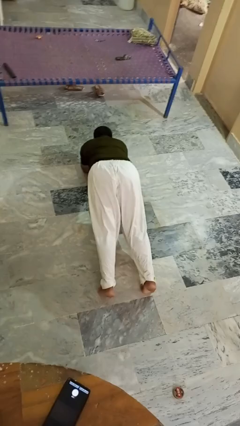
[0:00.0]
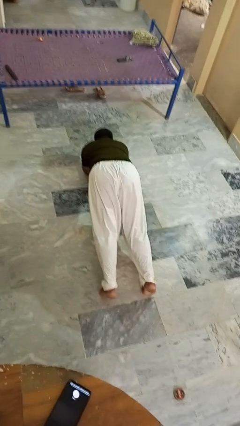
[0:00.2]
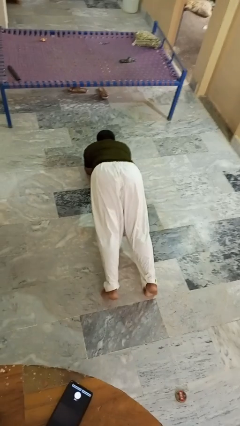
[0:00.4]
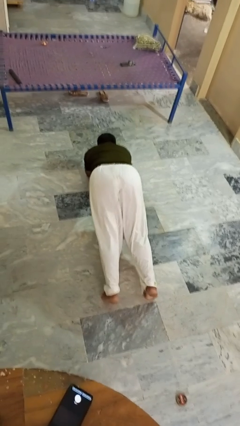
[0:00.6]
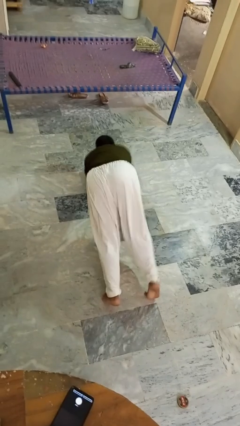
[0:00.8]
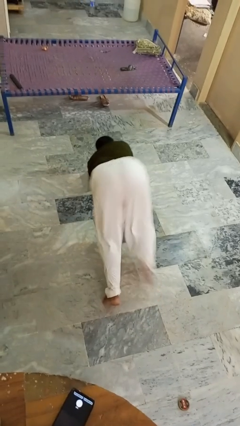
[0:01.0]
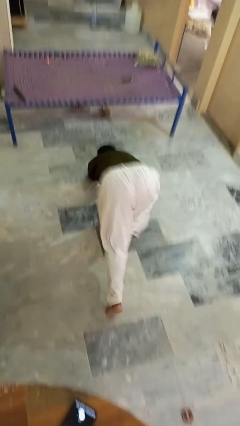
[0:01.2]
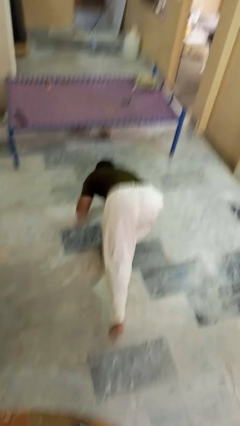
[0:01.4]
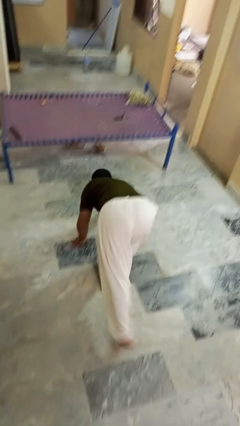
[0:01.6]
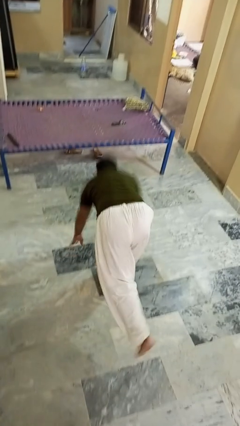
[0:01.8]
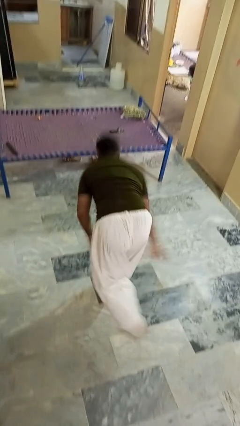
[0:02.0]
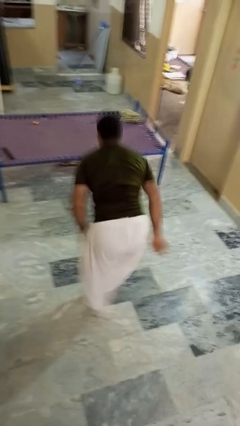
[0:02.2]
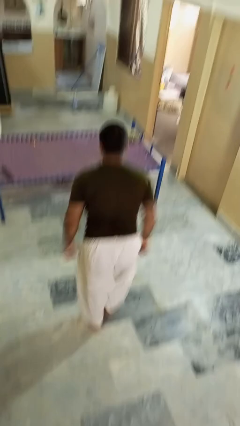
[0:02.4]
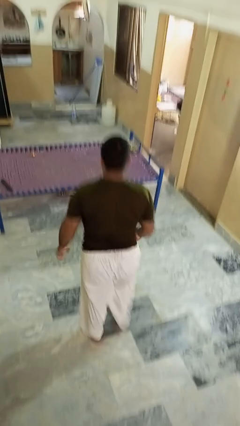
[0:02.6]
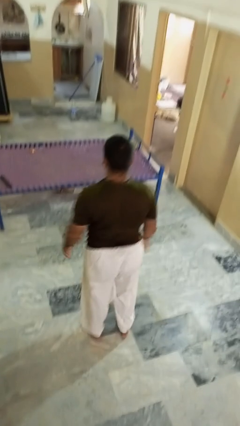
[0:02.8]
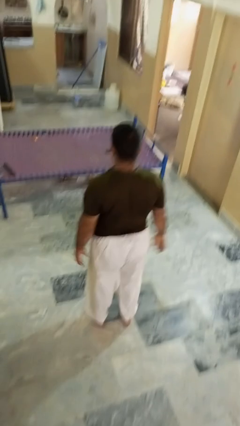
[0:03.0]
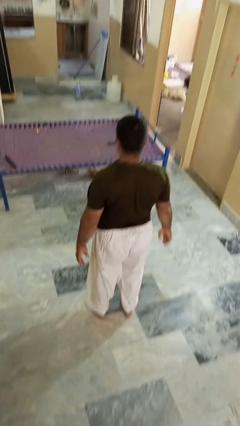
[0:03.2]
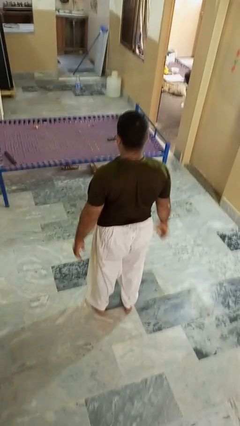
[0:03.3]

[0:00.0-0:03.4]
person stands up from floor

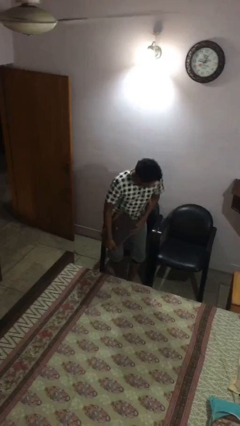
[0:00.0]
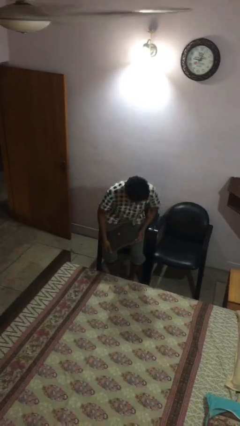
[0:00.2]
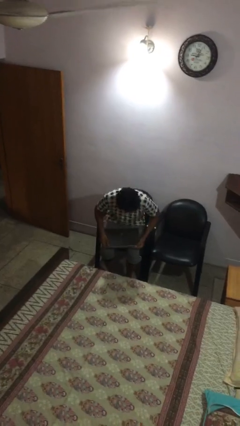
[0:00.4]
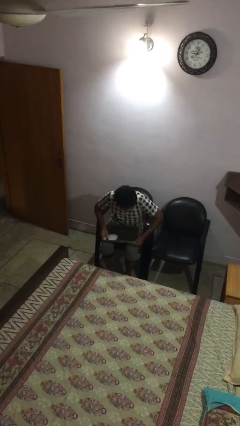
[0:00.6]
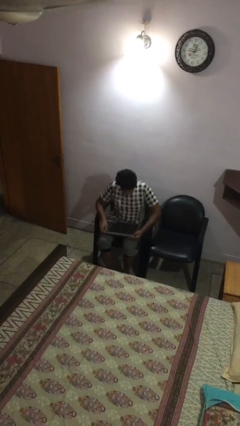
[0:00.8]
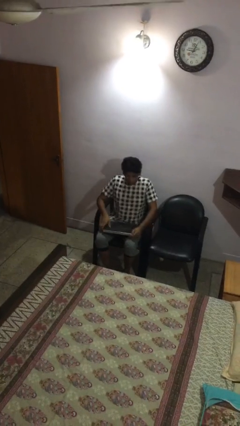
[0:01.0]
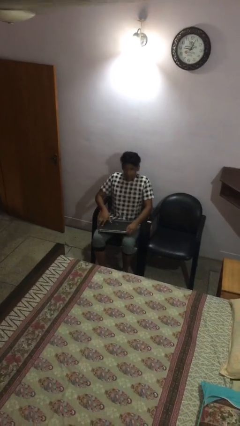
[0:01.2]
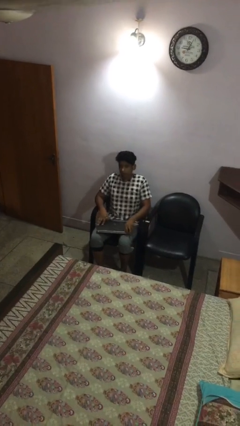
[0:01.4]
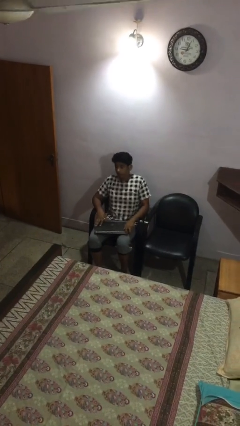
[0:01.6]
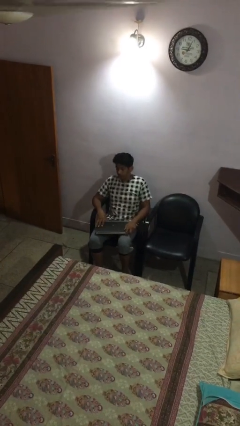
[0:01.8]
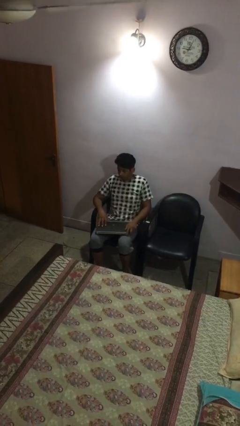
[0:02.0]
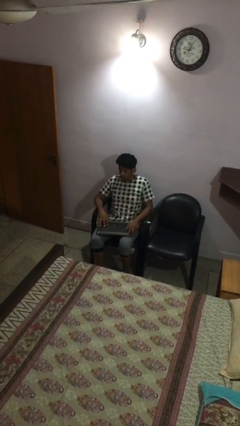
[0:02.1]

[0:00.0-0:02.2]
person sits down

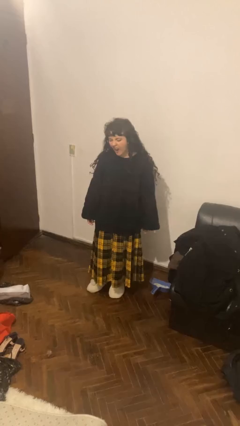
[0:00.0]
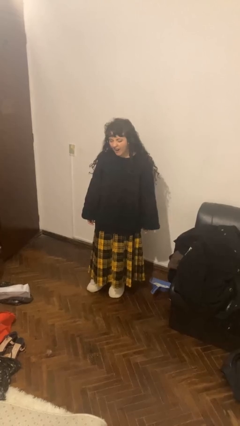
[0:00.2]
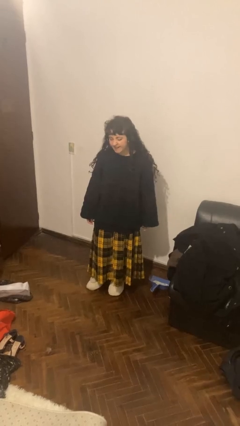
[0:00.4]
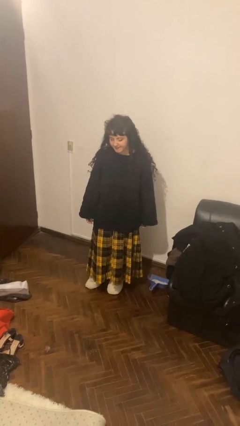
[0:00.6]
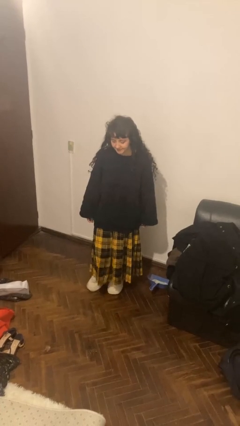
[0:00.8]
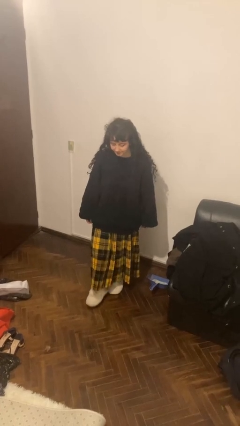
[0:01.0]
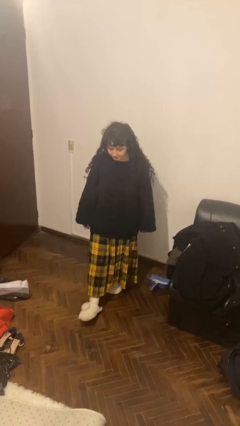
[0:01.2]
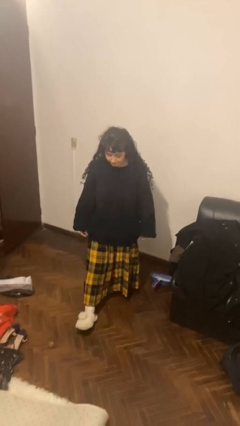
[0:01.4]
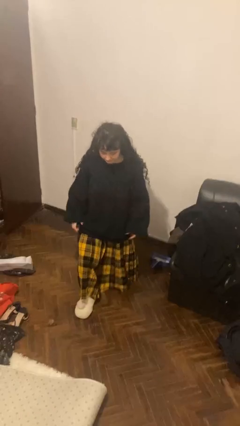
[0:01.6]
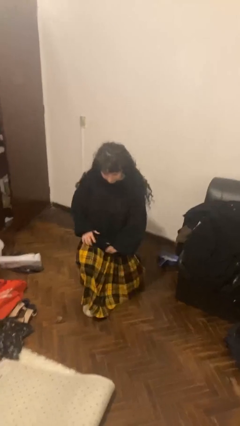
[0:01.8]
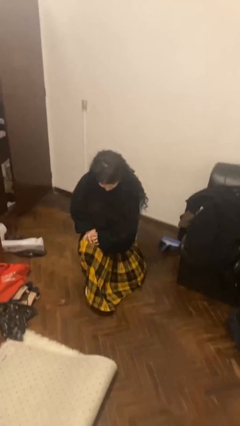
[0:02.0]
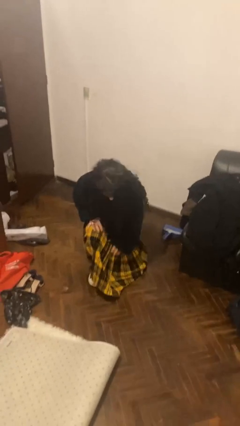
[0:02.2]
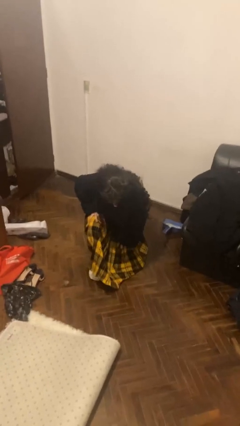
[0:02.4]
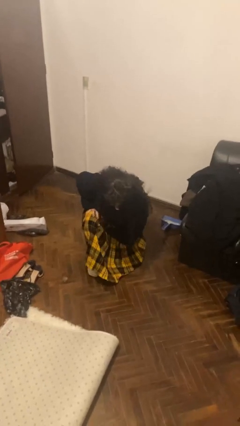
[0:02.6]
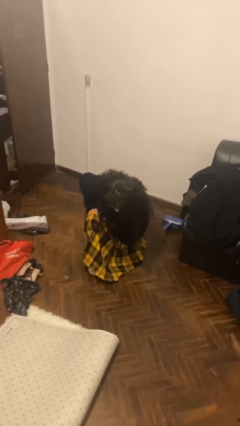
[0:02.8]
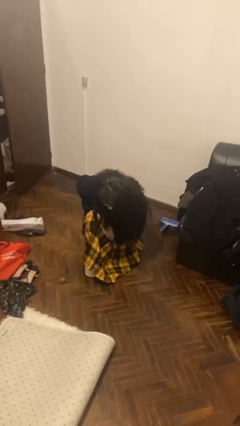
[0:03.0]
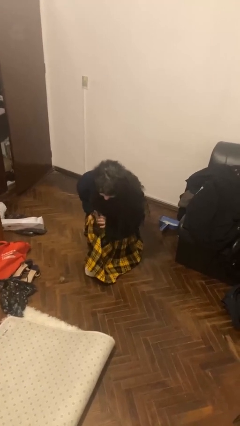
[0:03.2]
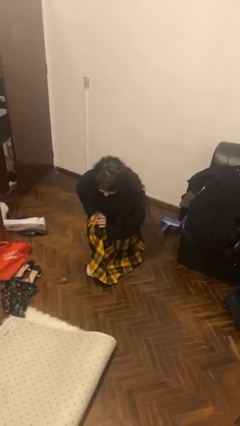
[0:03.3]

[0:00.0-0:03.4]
person kneels

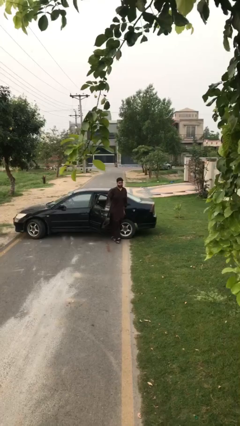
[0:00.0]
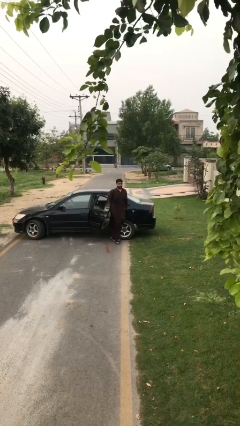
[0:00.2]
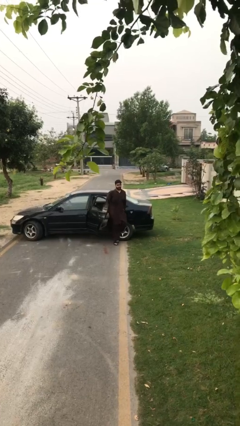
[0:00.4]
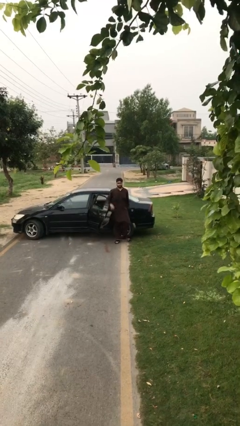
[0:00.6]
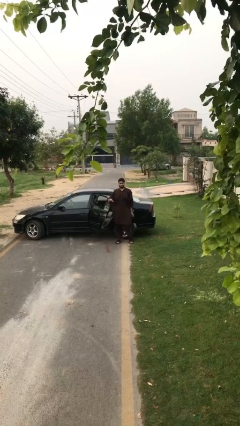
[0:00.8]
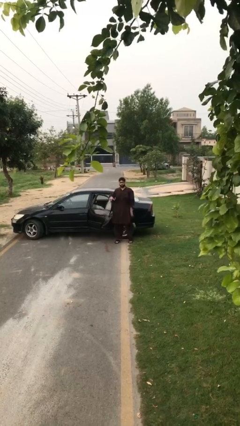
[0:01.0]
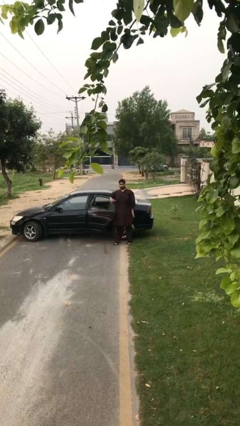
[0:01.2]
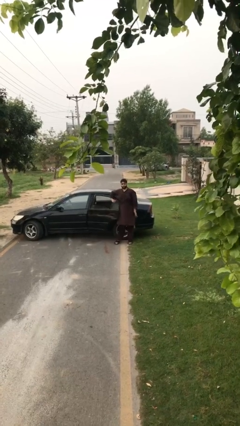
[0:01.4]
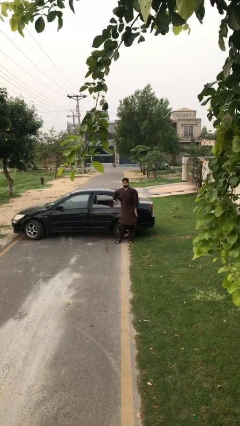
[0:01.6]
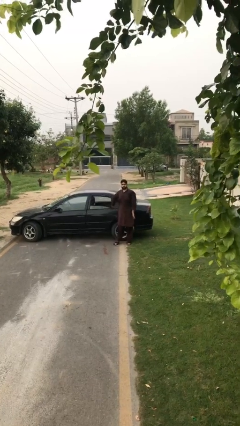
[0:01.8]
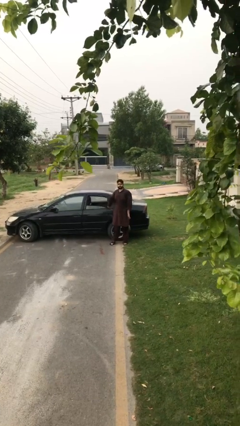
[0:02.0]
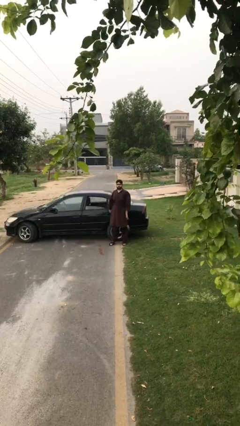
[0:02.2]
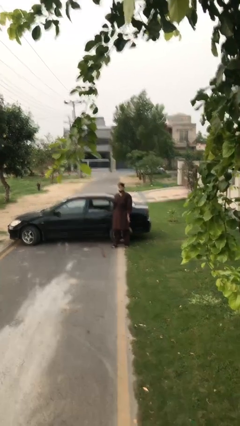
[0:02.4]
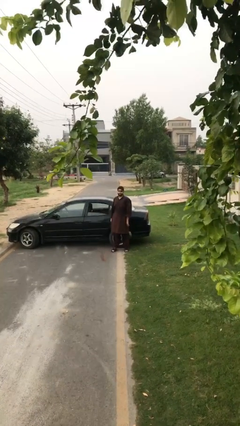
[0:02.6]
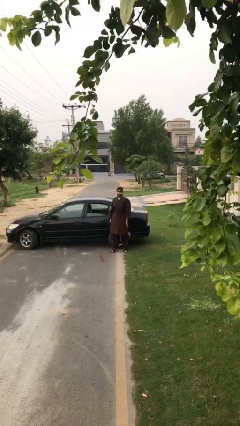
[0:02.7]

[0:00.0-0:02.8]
person closes car door

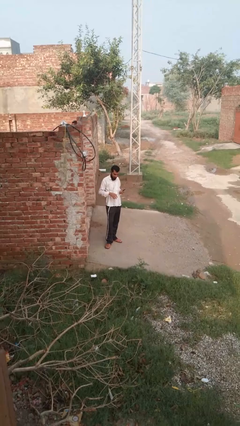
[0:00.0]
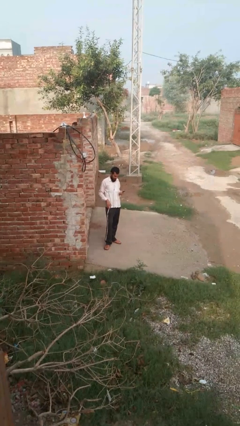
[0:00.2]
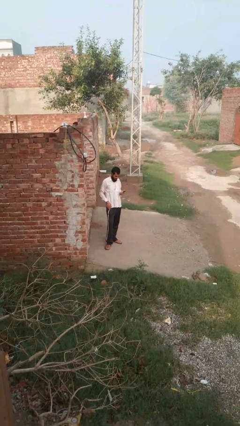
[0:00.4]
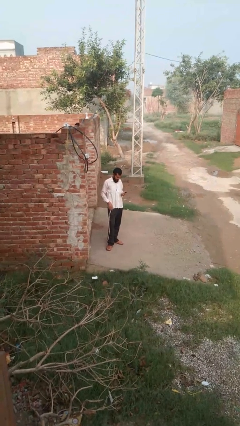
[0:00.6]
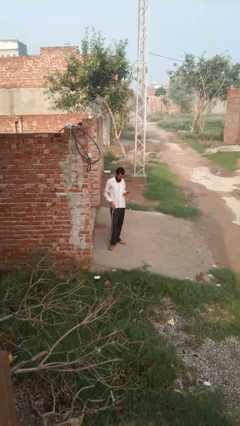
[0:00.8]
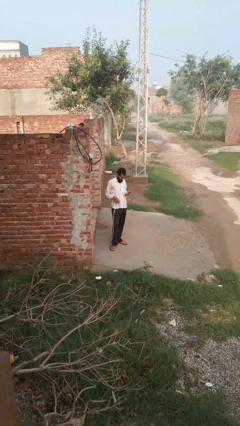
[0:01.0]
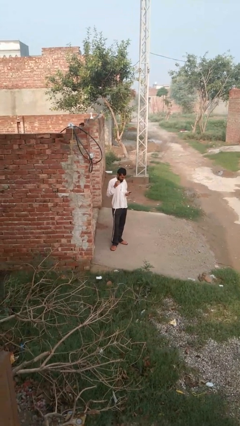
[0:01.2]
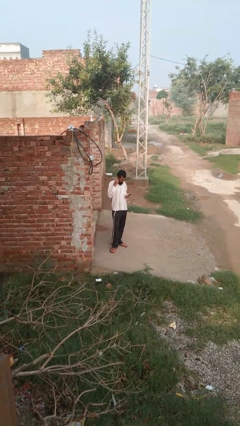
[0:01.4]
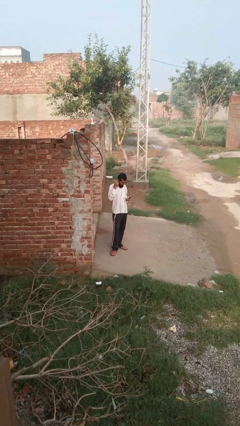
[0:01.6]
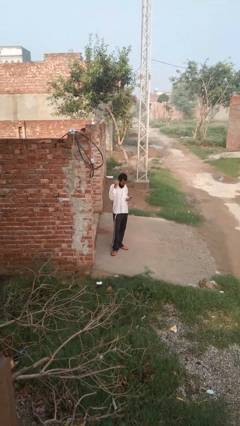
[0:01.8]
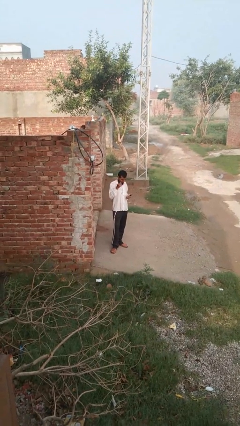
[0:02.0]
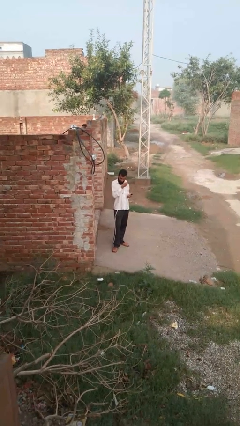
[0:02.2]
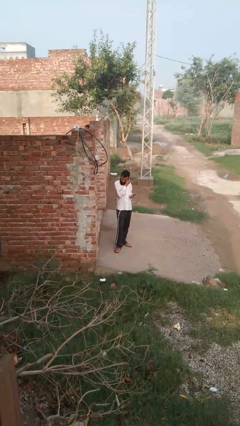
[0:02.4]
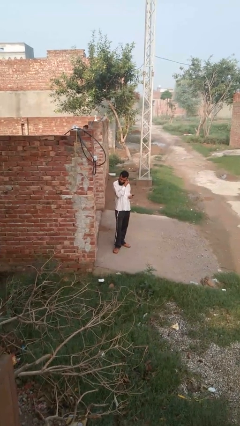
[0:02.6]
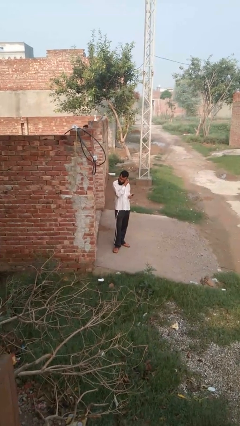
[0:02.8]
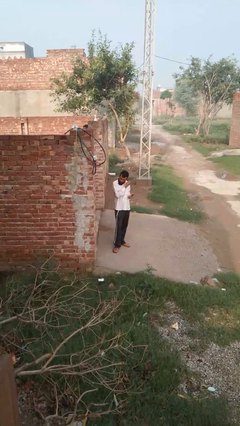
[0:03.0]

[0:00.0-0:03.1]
person takes off headphones

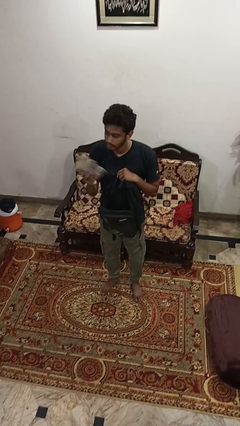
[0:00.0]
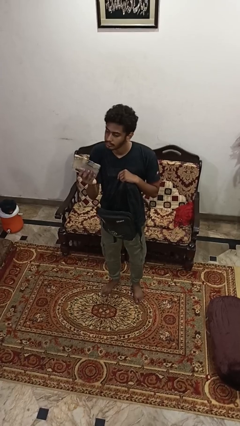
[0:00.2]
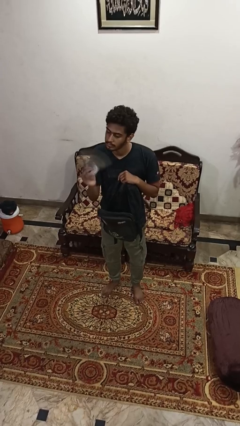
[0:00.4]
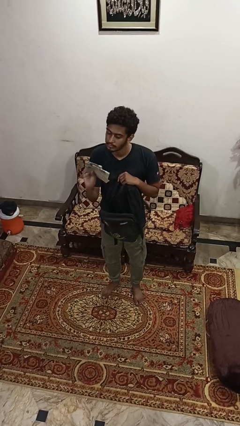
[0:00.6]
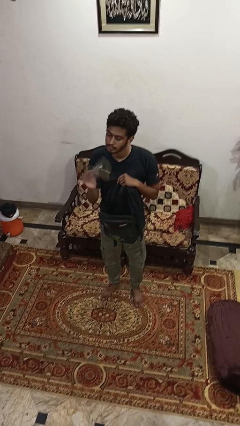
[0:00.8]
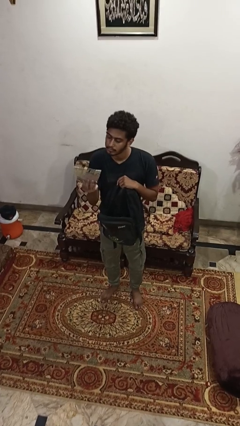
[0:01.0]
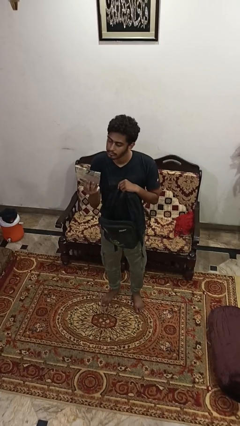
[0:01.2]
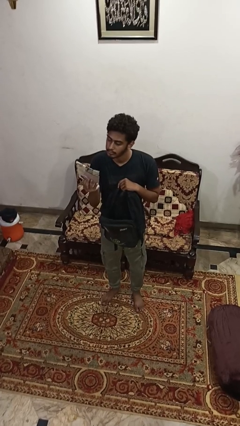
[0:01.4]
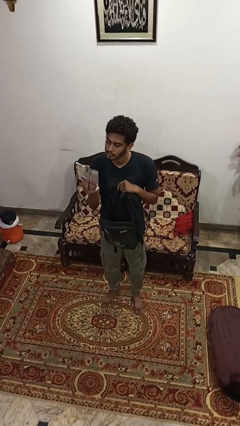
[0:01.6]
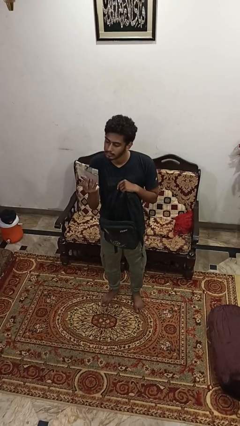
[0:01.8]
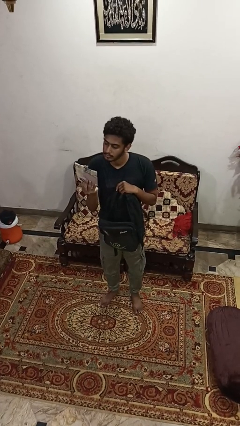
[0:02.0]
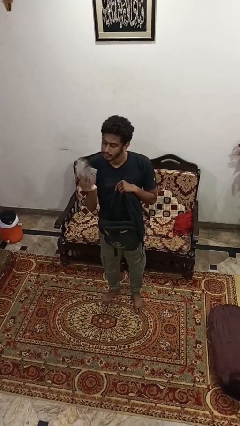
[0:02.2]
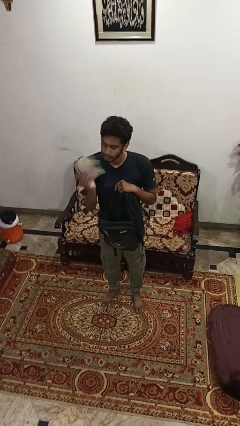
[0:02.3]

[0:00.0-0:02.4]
person takes object from backpack
